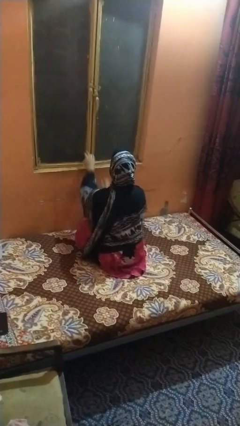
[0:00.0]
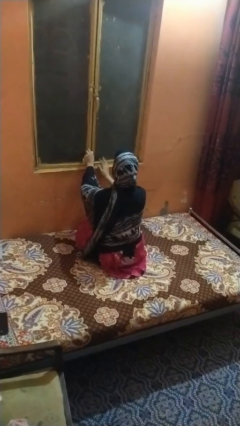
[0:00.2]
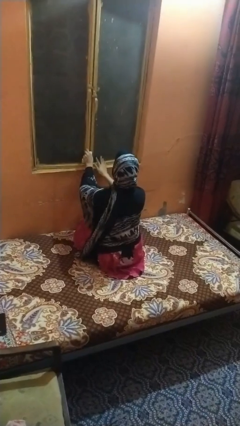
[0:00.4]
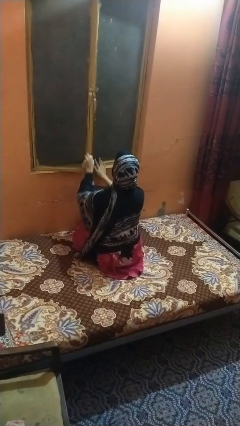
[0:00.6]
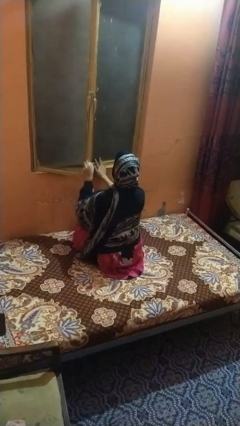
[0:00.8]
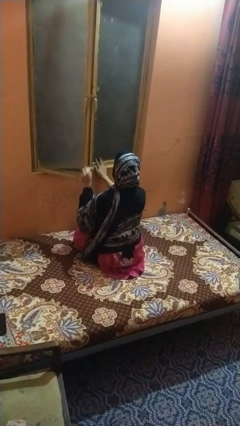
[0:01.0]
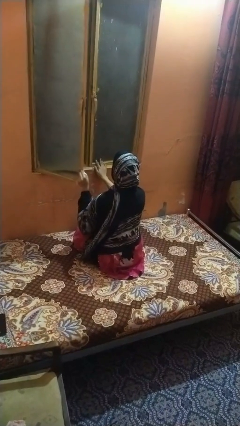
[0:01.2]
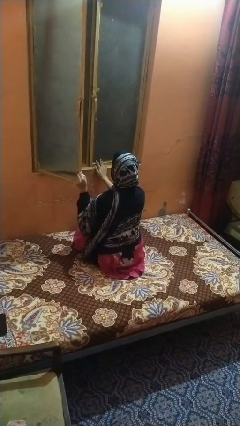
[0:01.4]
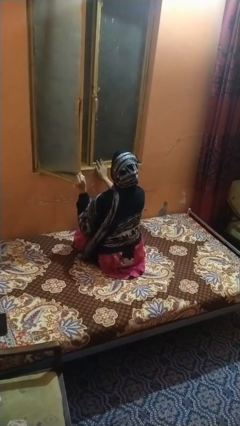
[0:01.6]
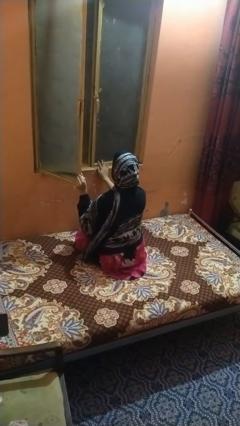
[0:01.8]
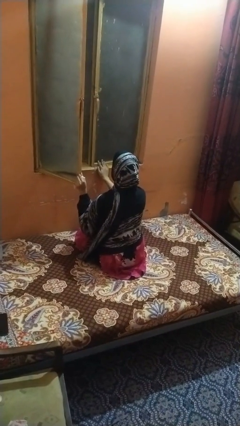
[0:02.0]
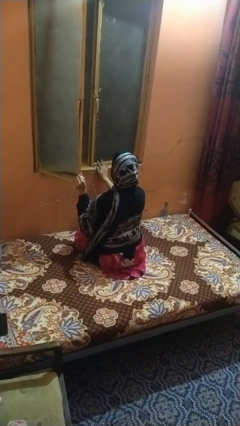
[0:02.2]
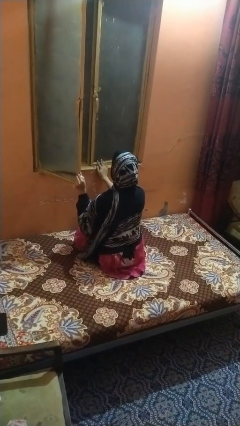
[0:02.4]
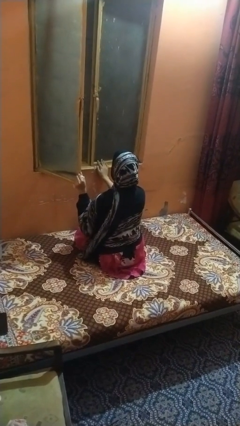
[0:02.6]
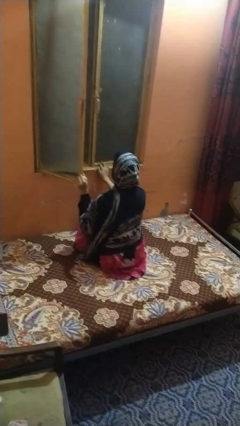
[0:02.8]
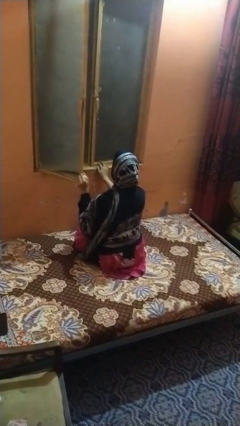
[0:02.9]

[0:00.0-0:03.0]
person opens home window

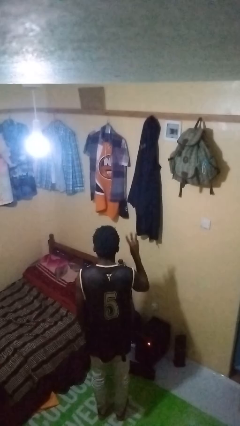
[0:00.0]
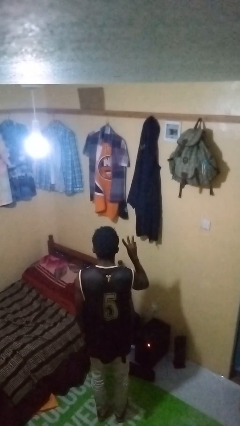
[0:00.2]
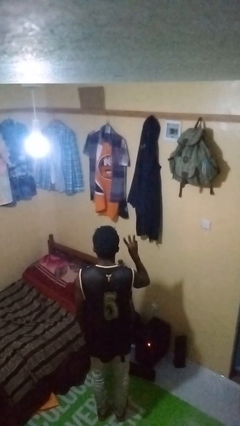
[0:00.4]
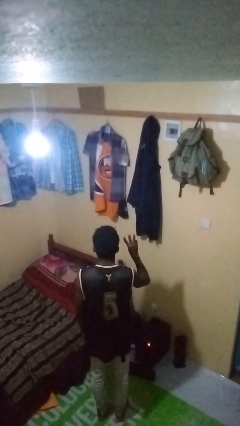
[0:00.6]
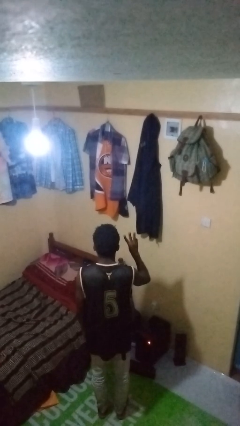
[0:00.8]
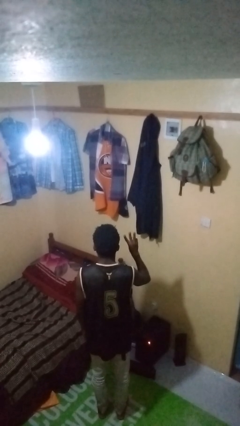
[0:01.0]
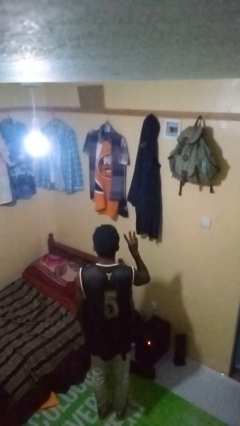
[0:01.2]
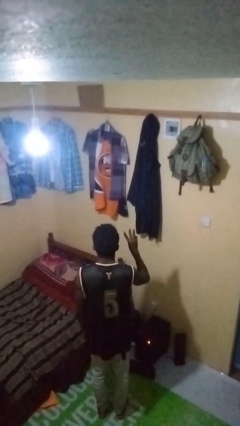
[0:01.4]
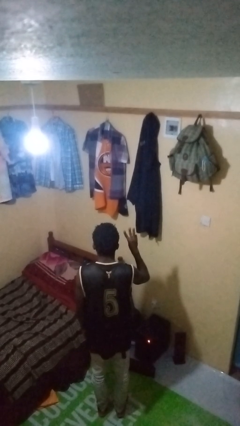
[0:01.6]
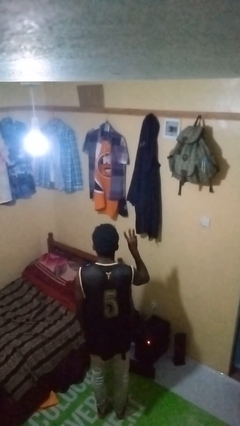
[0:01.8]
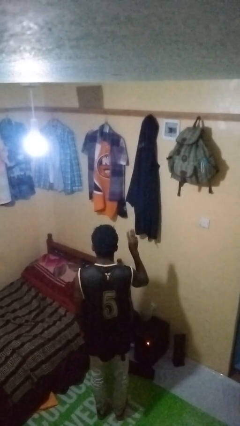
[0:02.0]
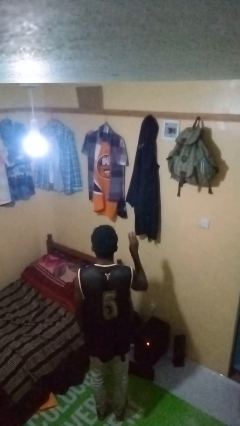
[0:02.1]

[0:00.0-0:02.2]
person gestures number three

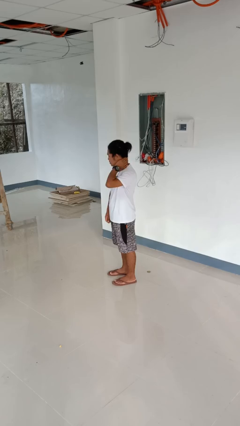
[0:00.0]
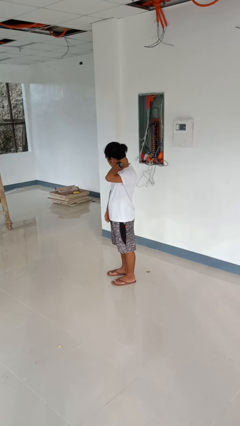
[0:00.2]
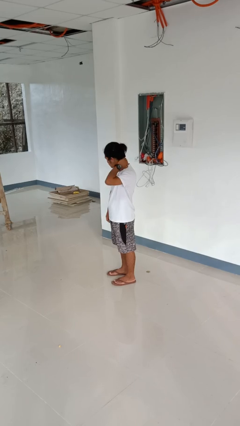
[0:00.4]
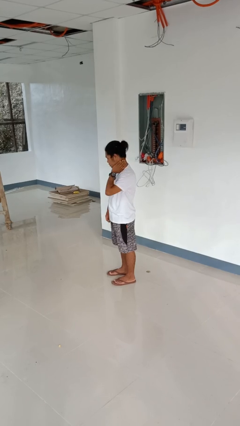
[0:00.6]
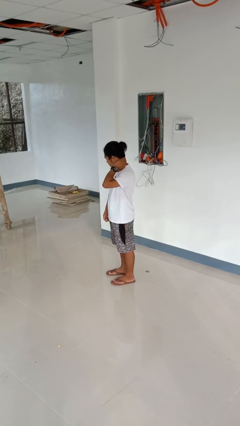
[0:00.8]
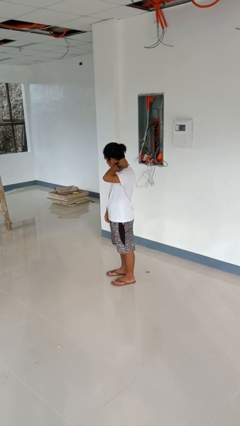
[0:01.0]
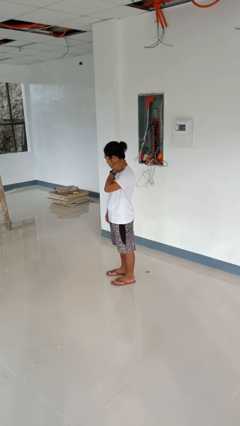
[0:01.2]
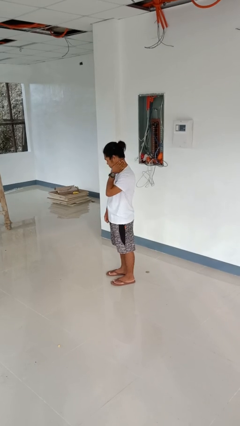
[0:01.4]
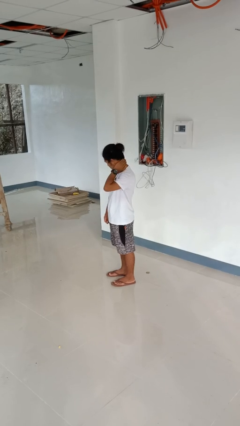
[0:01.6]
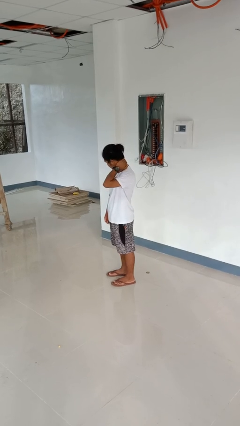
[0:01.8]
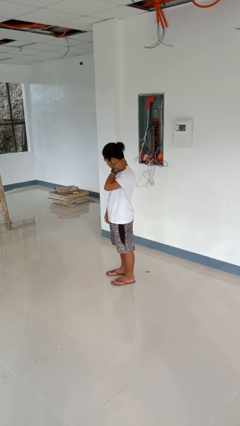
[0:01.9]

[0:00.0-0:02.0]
person rubs neck

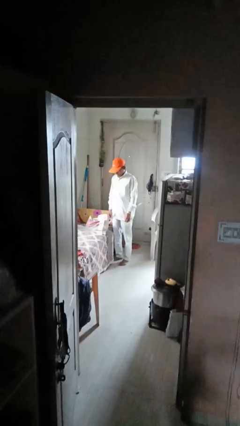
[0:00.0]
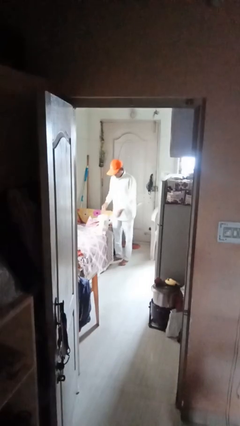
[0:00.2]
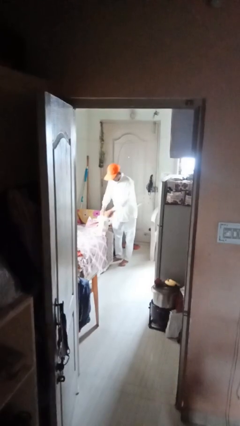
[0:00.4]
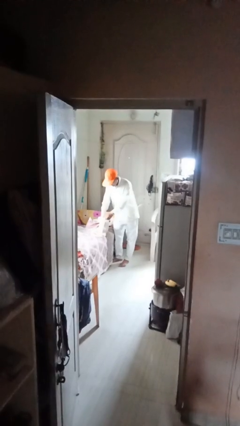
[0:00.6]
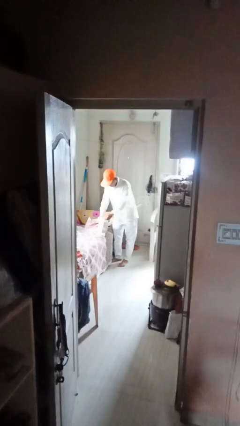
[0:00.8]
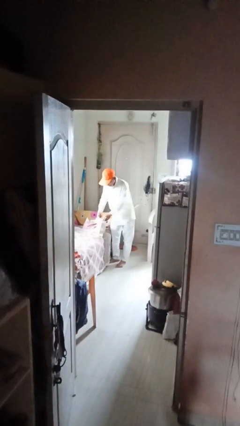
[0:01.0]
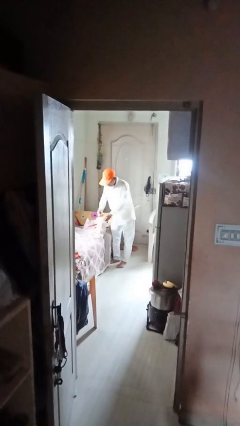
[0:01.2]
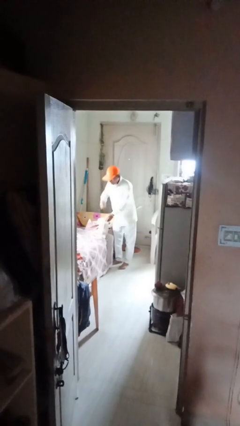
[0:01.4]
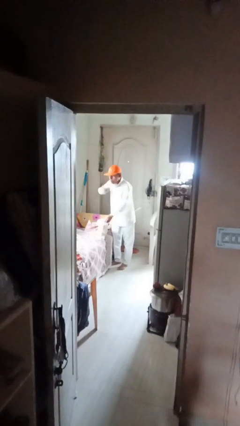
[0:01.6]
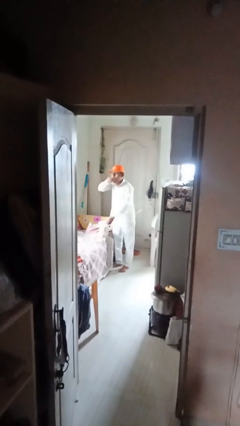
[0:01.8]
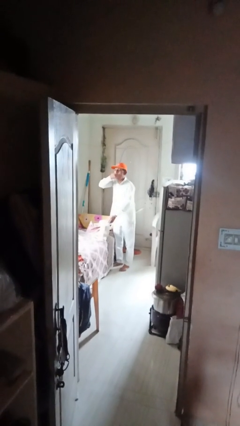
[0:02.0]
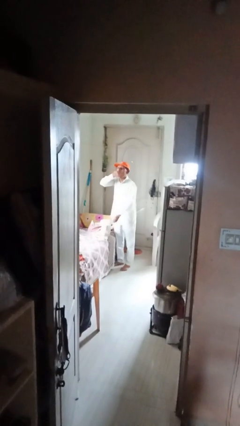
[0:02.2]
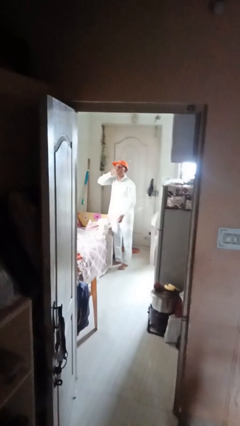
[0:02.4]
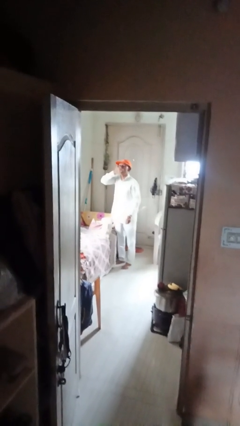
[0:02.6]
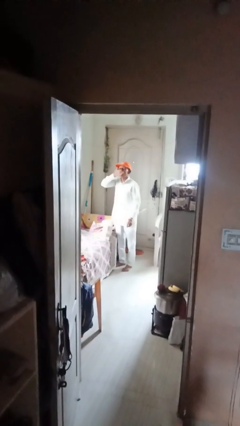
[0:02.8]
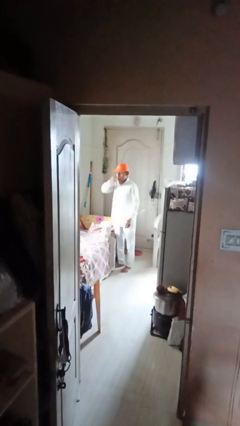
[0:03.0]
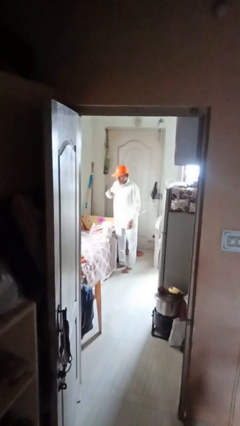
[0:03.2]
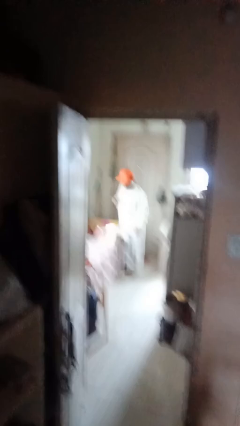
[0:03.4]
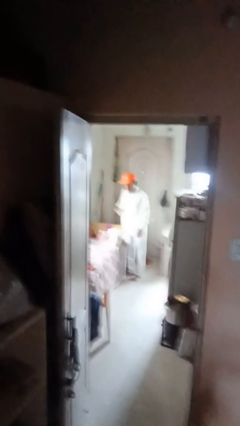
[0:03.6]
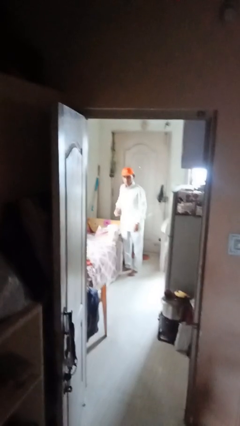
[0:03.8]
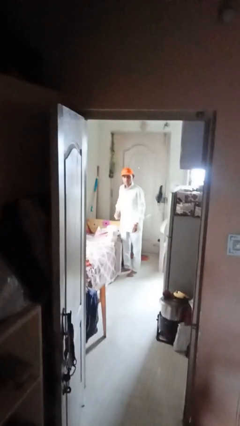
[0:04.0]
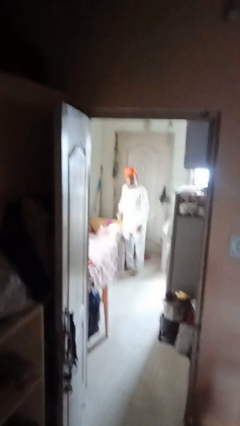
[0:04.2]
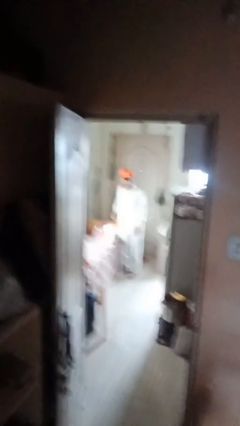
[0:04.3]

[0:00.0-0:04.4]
person eats snack from bag

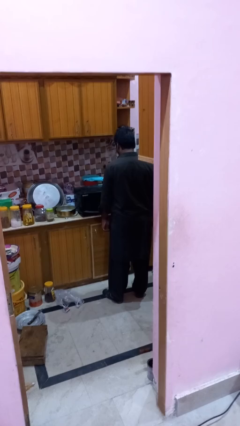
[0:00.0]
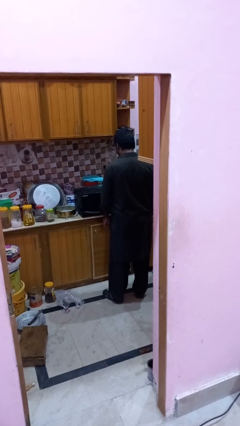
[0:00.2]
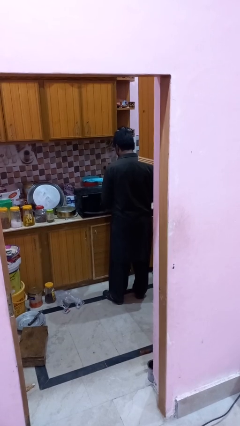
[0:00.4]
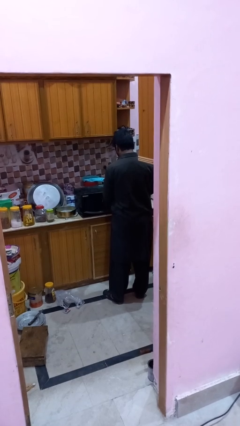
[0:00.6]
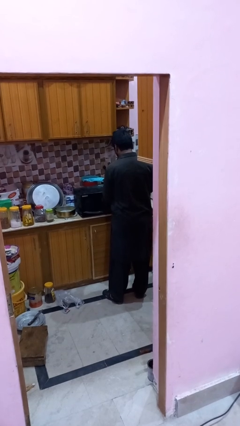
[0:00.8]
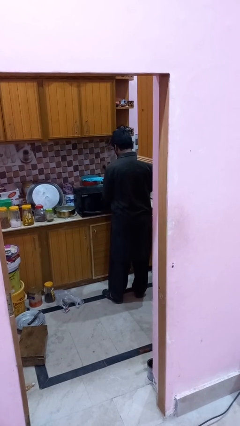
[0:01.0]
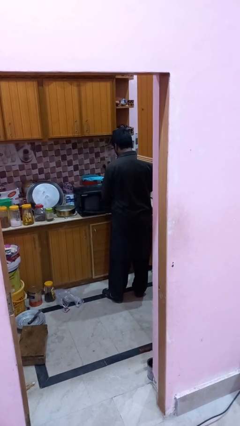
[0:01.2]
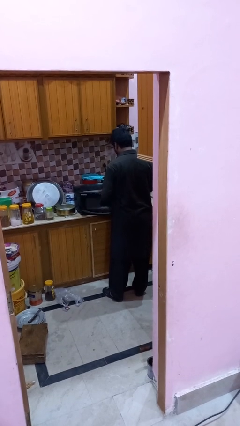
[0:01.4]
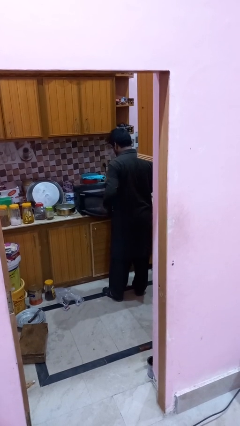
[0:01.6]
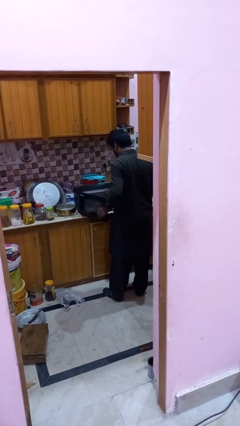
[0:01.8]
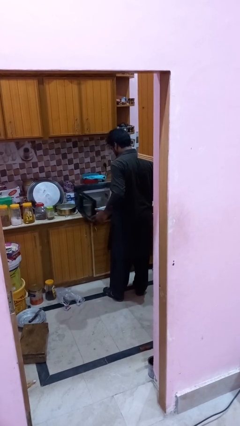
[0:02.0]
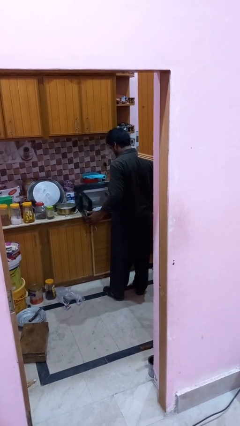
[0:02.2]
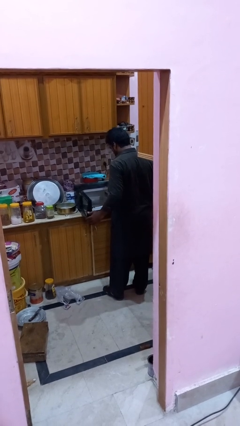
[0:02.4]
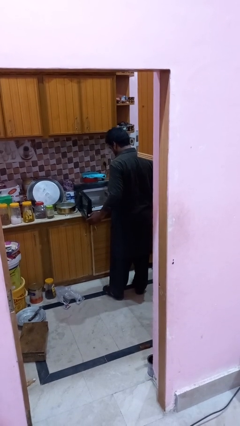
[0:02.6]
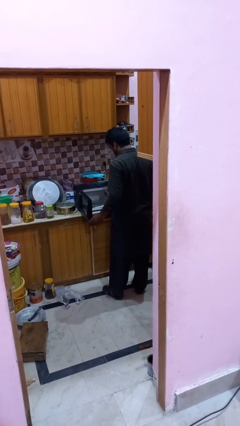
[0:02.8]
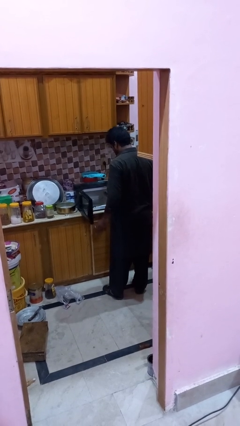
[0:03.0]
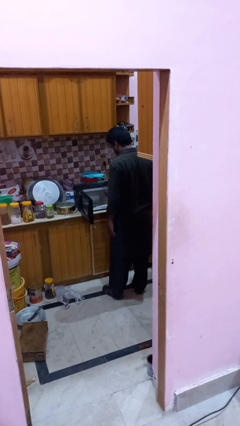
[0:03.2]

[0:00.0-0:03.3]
person opens oven door

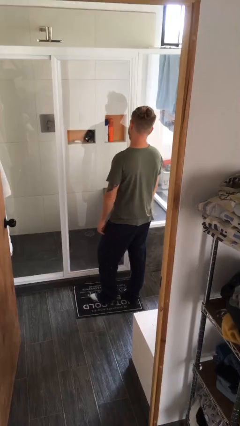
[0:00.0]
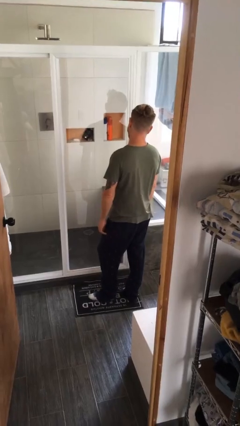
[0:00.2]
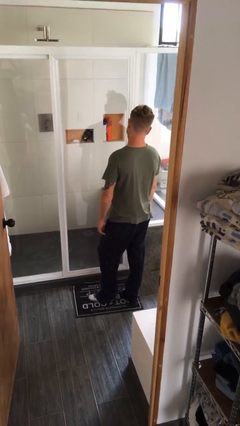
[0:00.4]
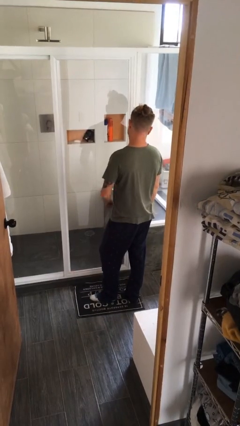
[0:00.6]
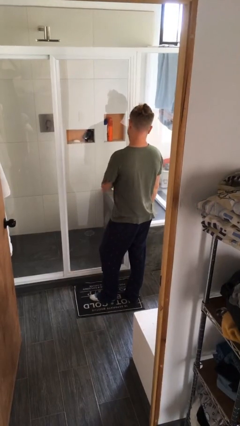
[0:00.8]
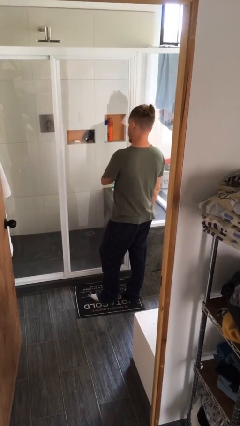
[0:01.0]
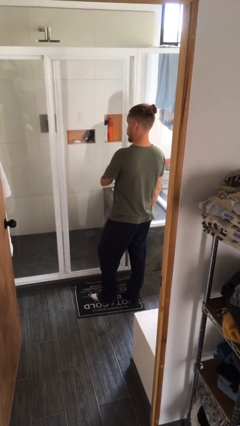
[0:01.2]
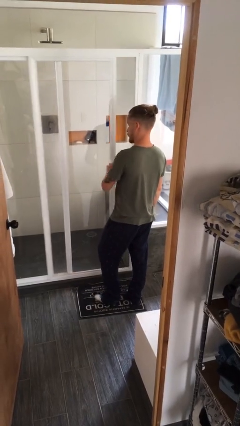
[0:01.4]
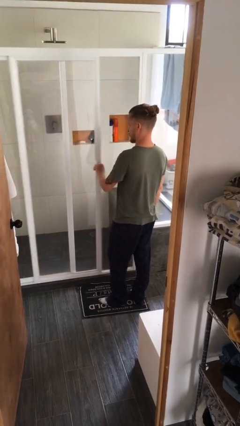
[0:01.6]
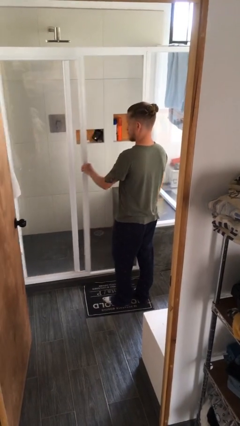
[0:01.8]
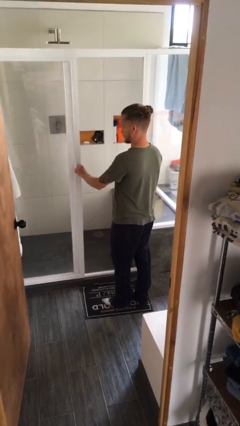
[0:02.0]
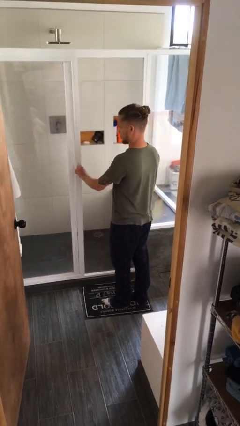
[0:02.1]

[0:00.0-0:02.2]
person opens sliding door
